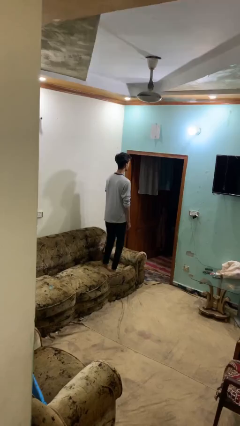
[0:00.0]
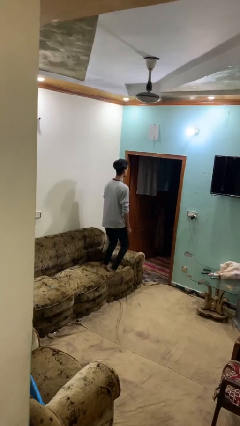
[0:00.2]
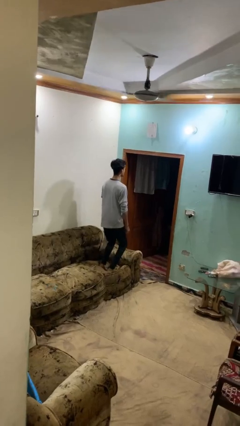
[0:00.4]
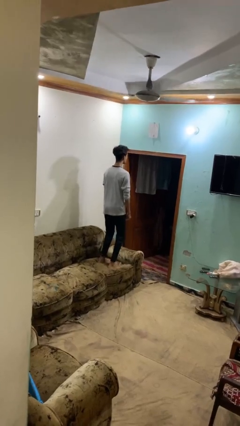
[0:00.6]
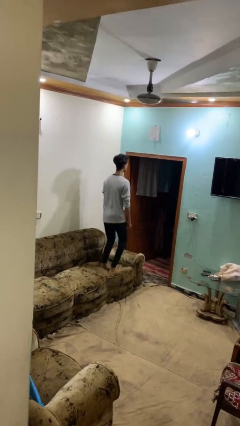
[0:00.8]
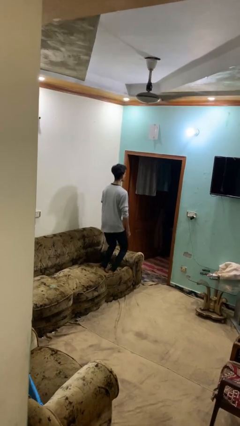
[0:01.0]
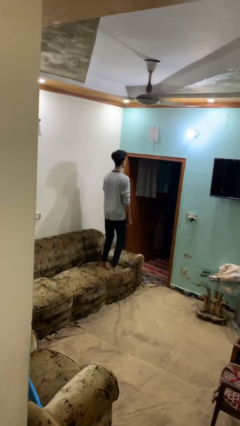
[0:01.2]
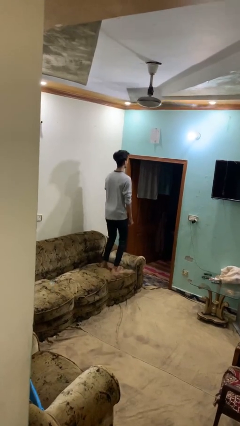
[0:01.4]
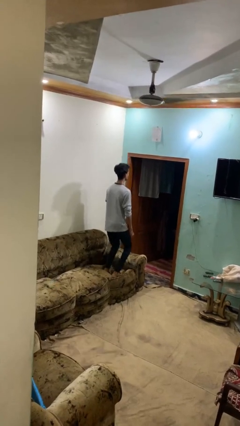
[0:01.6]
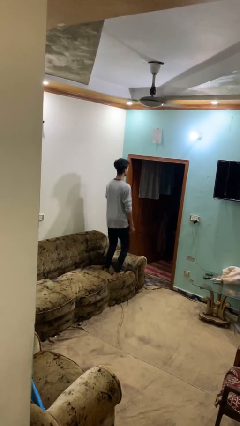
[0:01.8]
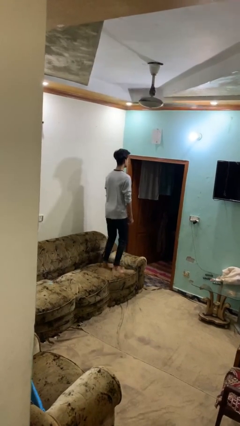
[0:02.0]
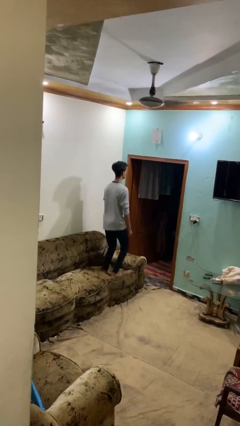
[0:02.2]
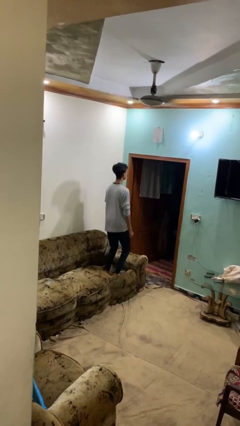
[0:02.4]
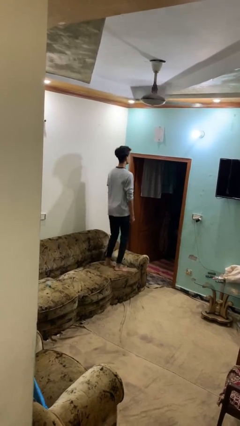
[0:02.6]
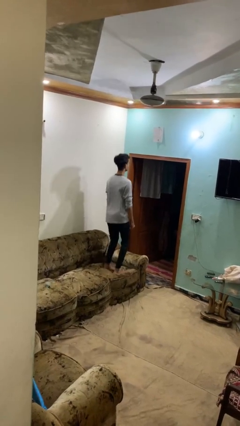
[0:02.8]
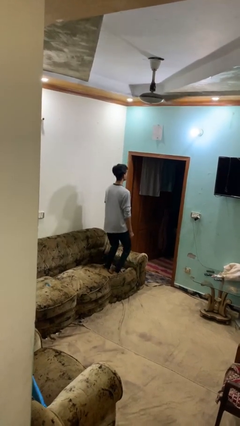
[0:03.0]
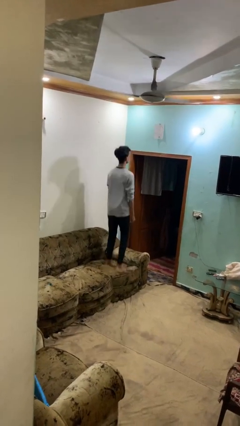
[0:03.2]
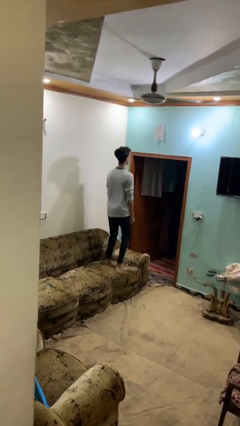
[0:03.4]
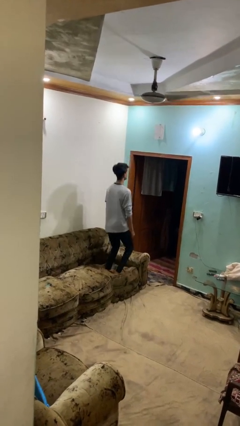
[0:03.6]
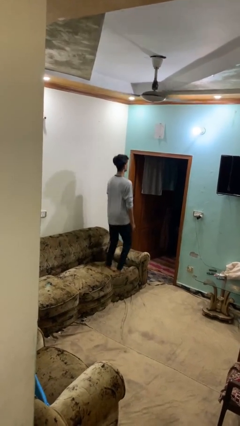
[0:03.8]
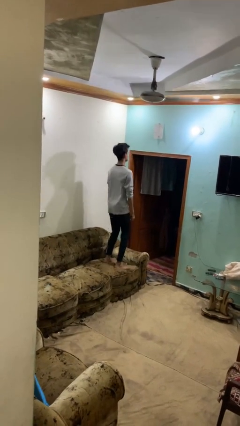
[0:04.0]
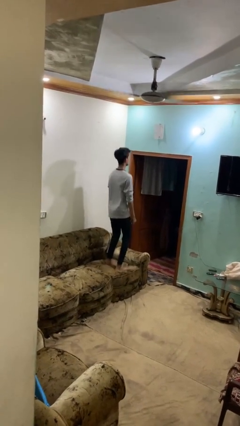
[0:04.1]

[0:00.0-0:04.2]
person jumps on couch

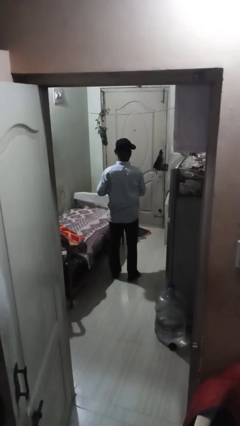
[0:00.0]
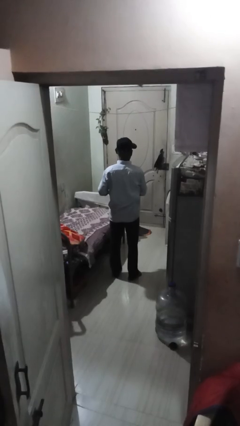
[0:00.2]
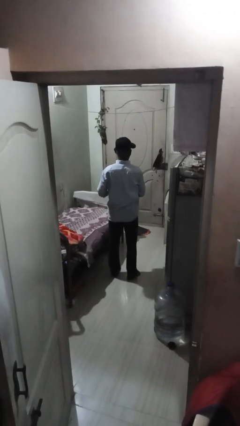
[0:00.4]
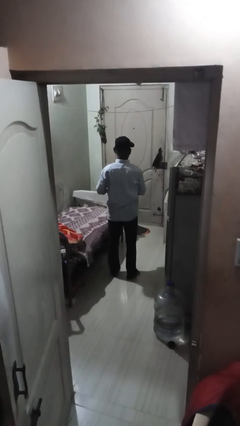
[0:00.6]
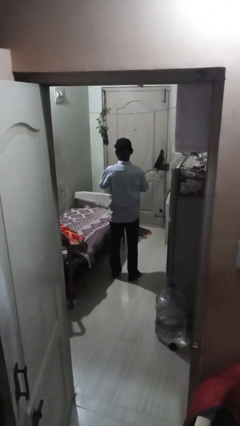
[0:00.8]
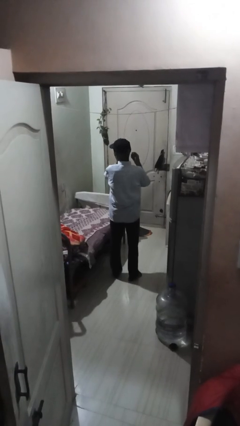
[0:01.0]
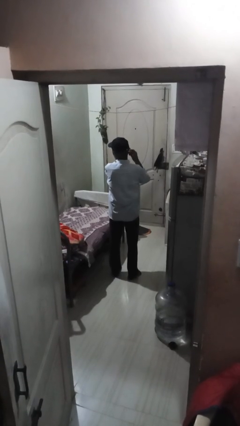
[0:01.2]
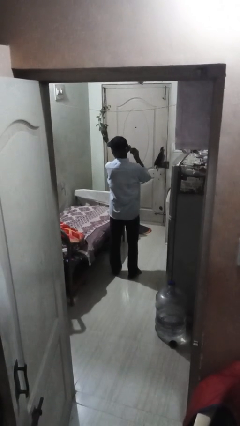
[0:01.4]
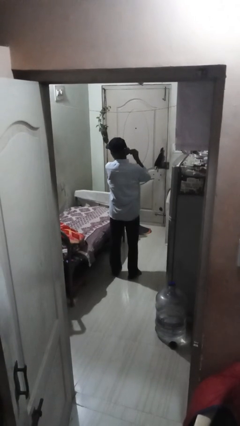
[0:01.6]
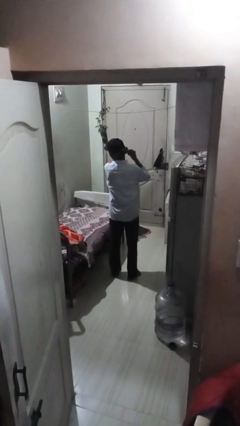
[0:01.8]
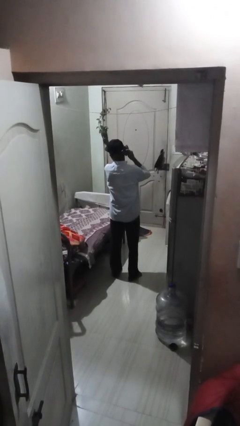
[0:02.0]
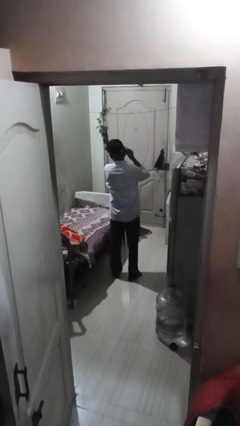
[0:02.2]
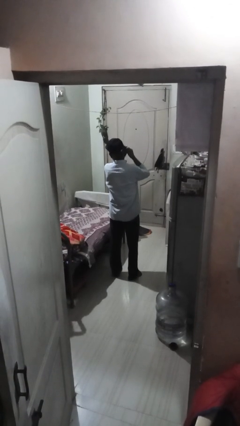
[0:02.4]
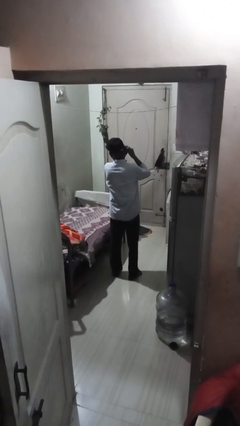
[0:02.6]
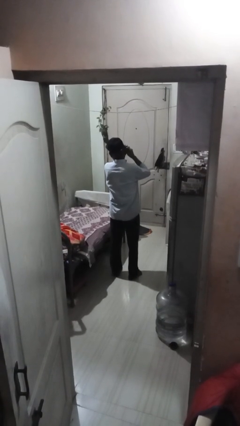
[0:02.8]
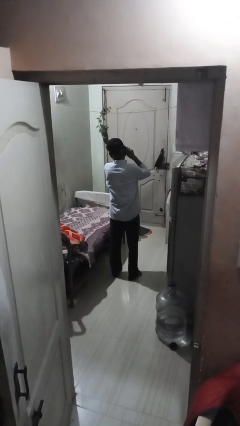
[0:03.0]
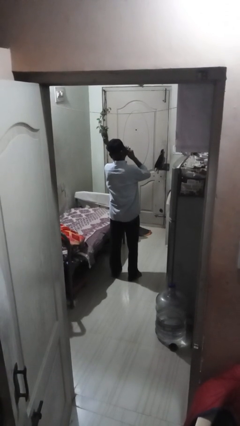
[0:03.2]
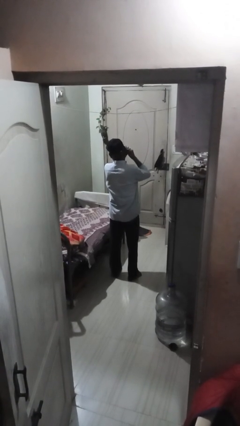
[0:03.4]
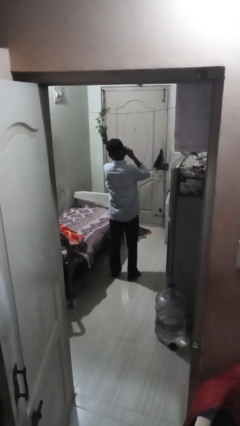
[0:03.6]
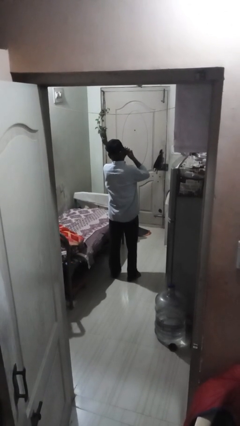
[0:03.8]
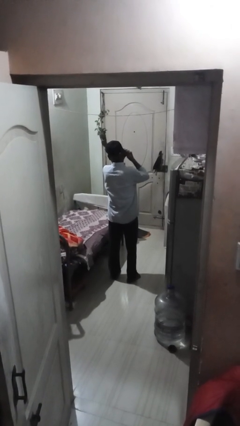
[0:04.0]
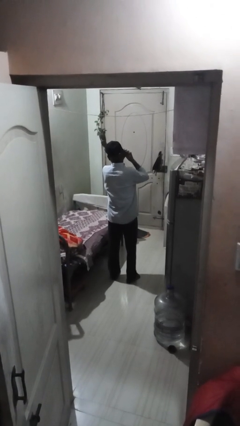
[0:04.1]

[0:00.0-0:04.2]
person puts on earrings

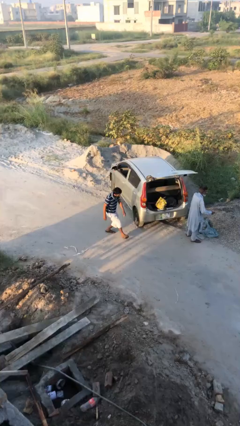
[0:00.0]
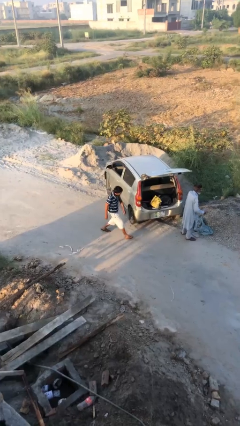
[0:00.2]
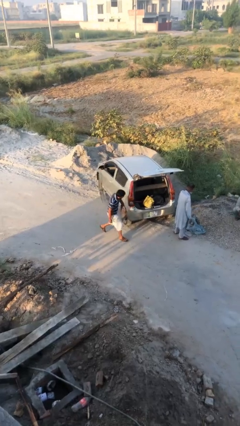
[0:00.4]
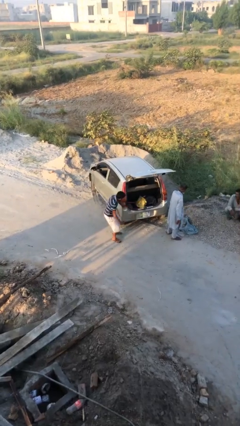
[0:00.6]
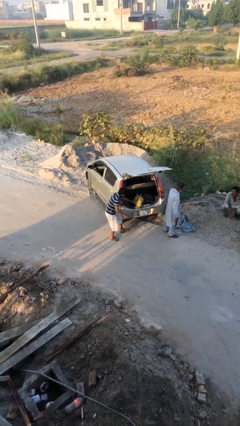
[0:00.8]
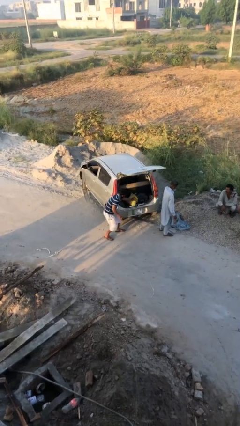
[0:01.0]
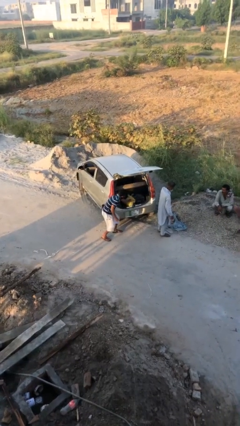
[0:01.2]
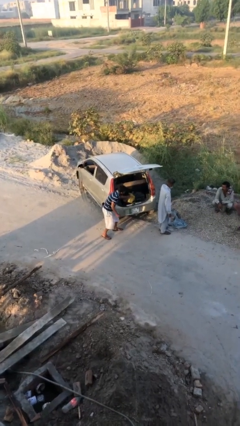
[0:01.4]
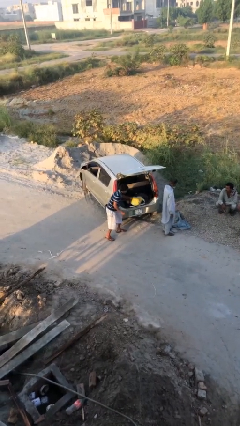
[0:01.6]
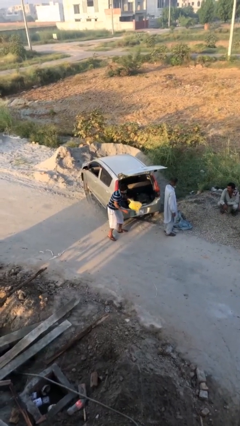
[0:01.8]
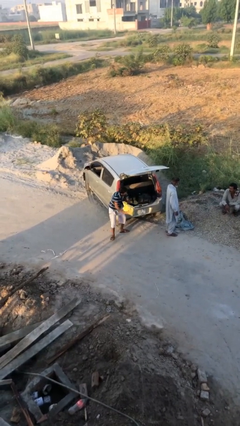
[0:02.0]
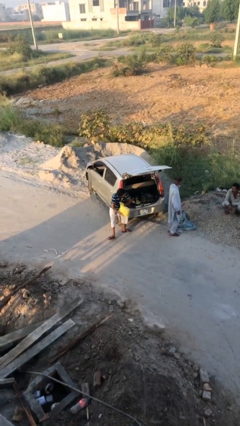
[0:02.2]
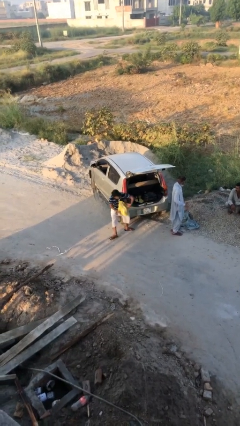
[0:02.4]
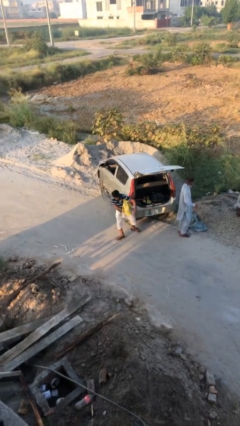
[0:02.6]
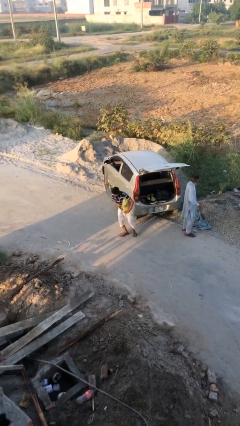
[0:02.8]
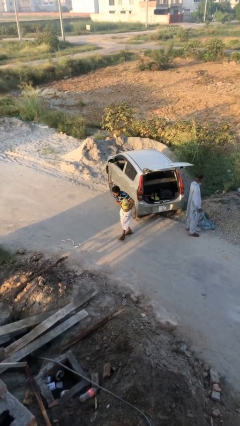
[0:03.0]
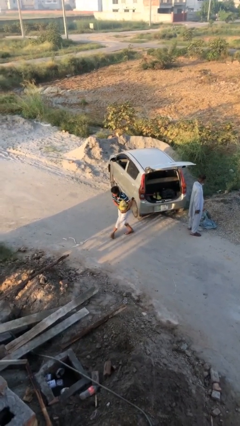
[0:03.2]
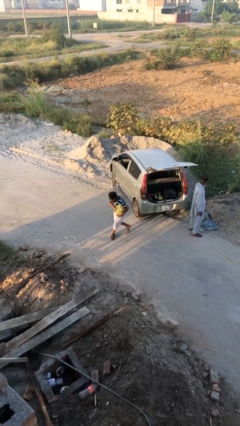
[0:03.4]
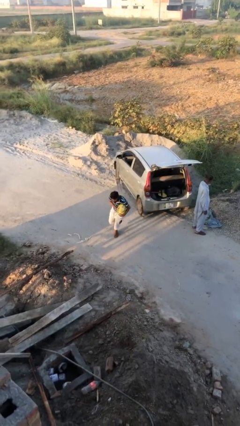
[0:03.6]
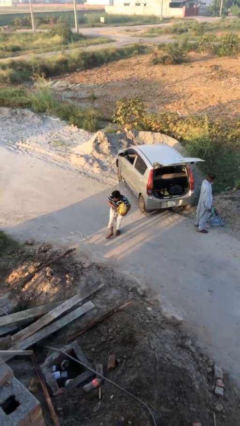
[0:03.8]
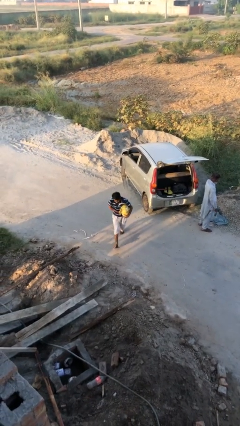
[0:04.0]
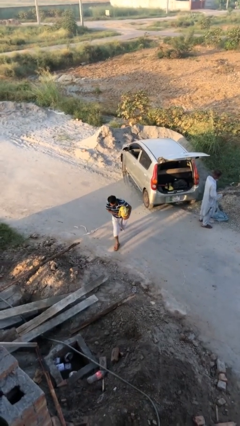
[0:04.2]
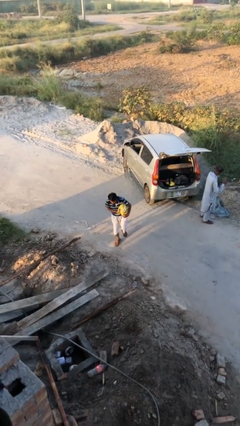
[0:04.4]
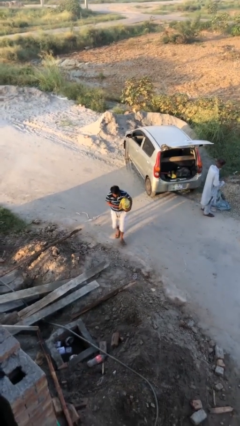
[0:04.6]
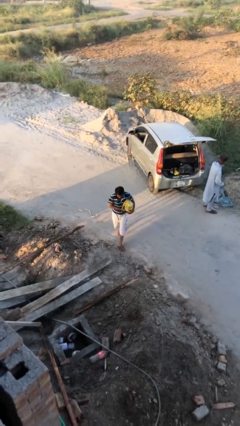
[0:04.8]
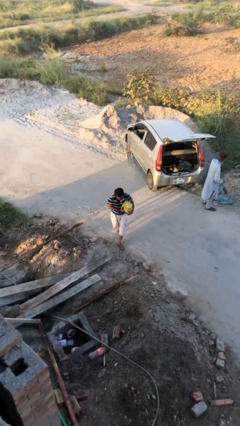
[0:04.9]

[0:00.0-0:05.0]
person steals object from person

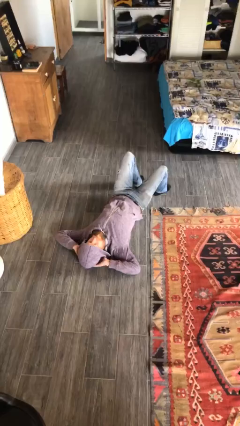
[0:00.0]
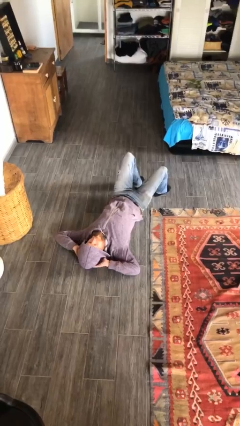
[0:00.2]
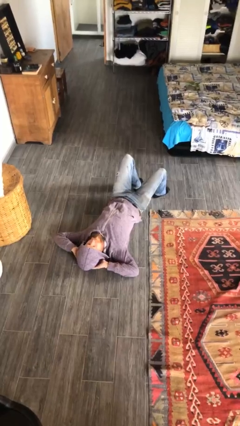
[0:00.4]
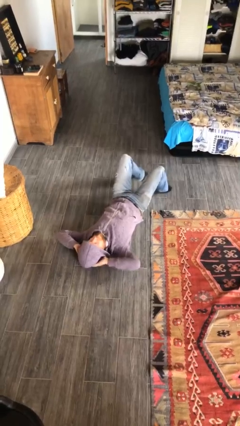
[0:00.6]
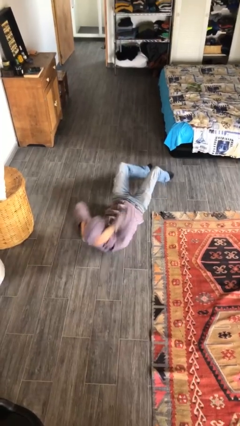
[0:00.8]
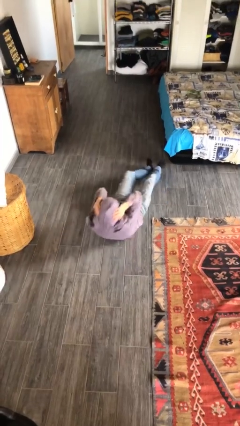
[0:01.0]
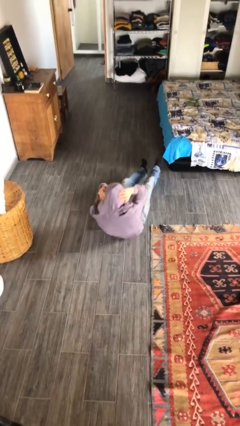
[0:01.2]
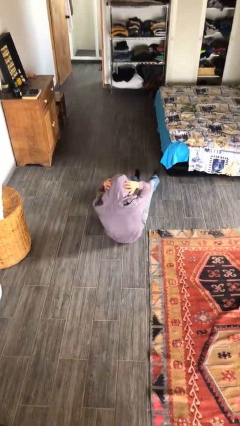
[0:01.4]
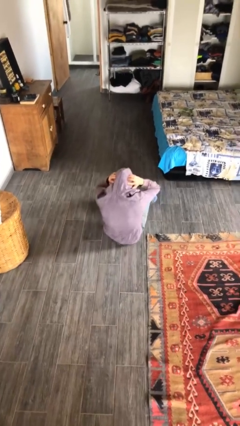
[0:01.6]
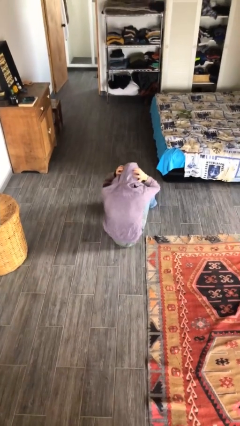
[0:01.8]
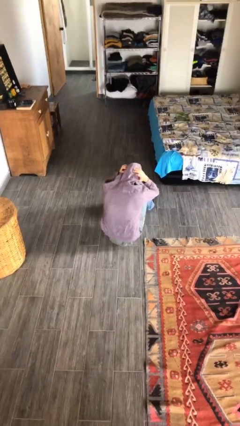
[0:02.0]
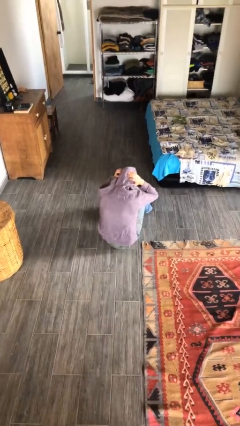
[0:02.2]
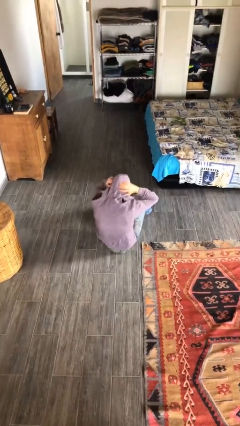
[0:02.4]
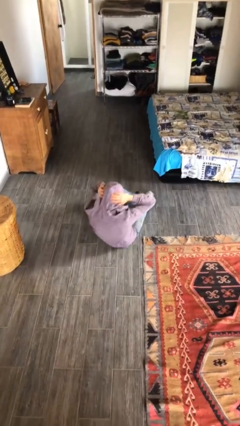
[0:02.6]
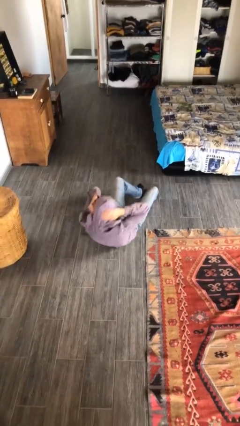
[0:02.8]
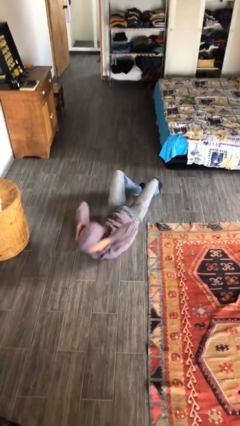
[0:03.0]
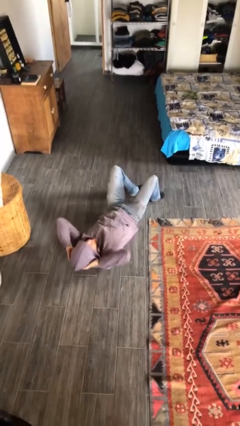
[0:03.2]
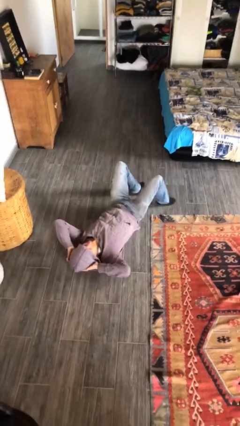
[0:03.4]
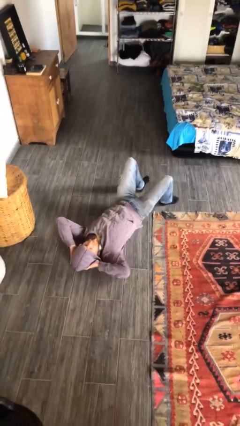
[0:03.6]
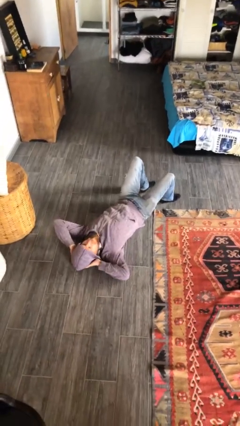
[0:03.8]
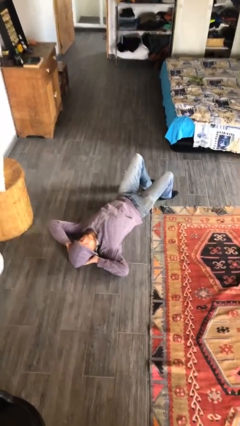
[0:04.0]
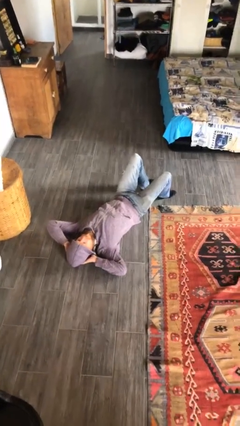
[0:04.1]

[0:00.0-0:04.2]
person exercises with situp
